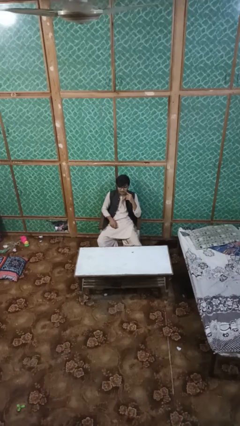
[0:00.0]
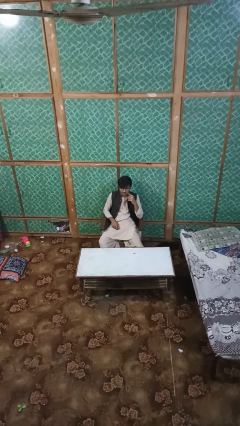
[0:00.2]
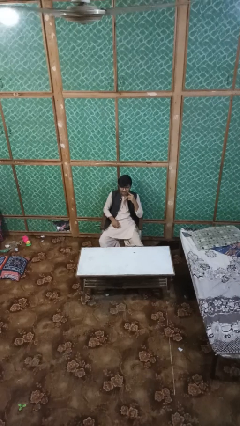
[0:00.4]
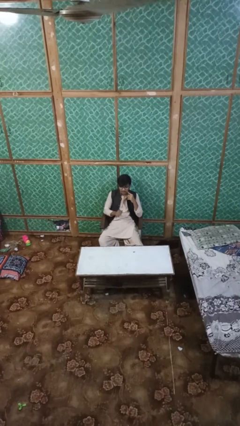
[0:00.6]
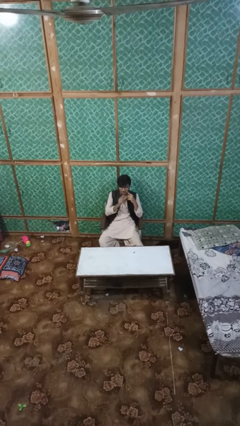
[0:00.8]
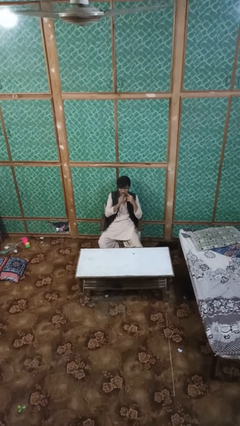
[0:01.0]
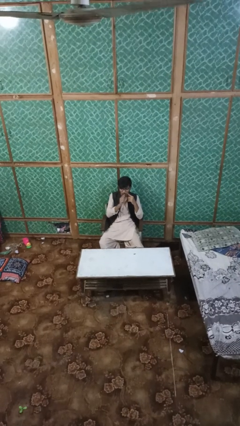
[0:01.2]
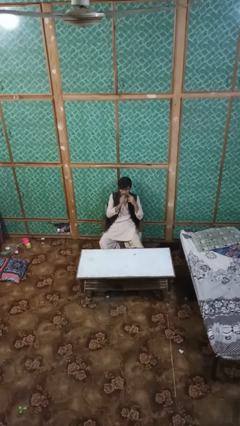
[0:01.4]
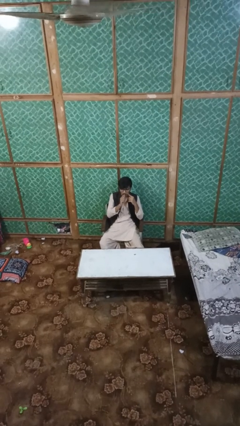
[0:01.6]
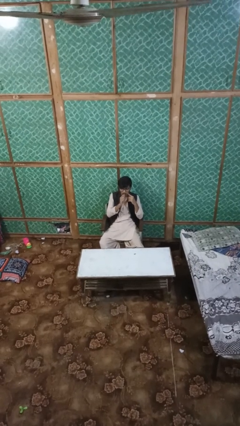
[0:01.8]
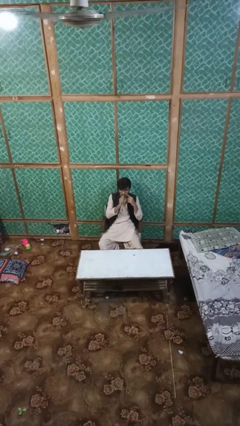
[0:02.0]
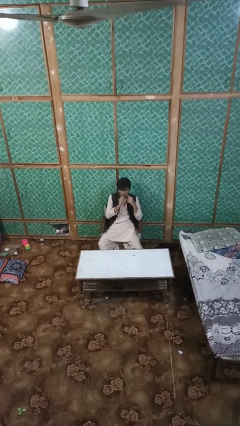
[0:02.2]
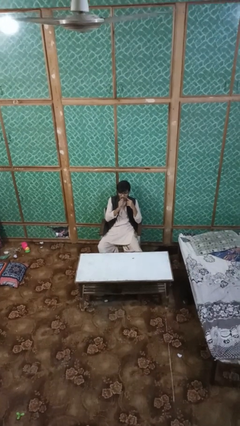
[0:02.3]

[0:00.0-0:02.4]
person vapes

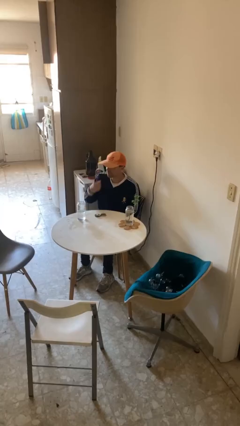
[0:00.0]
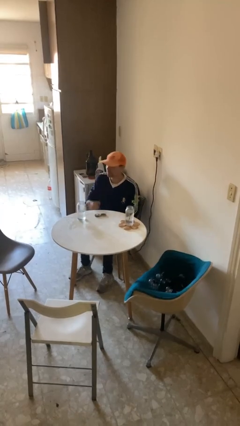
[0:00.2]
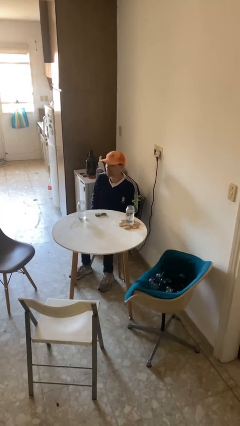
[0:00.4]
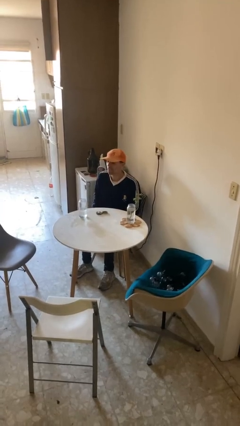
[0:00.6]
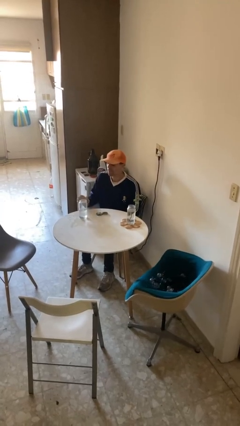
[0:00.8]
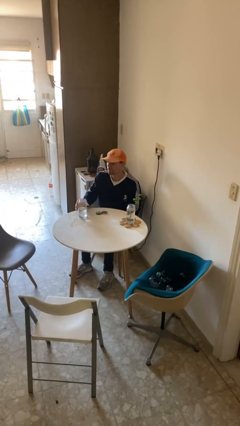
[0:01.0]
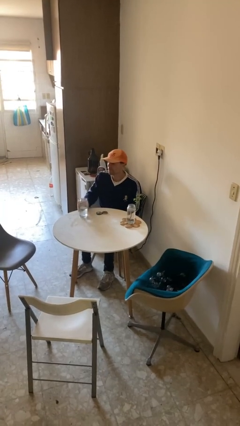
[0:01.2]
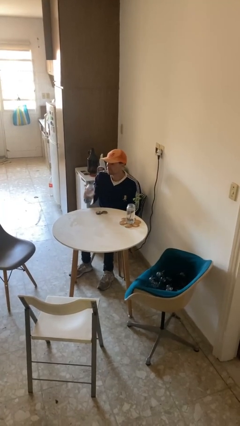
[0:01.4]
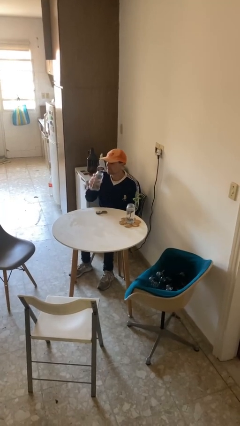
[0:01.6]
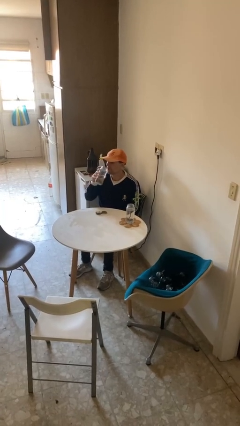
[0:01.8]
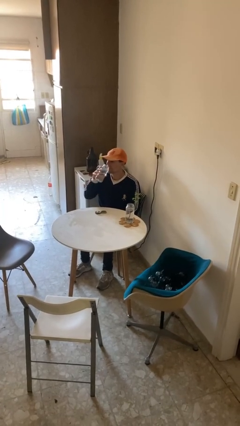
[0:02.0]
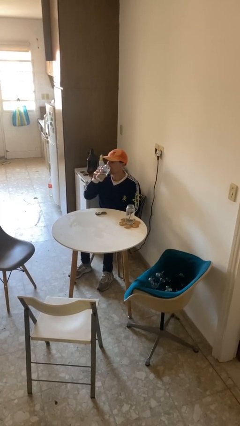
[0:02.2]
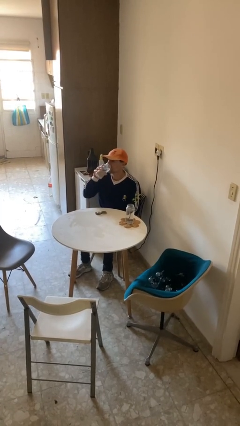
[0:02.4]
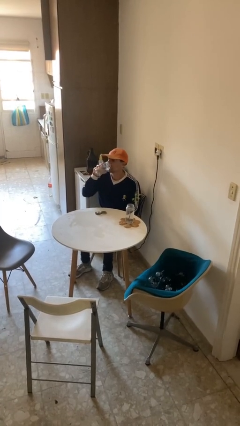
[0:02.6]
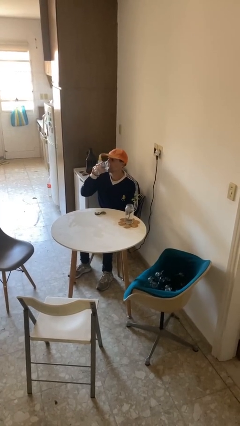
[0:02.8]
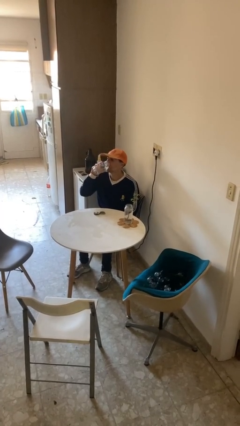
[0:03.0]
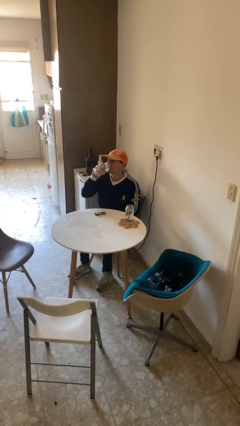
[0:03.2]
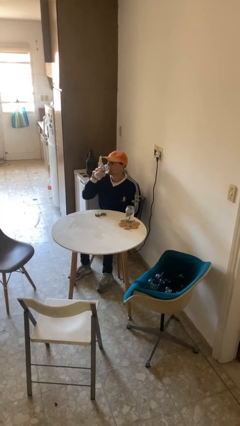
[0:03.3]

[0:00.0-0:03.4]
person drinks from cup

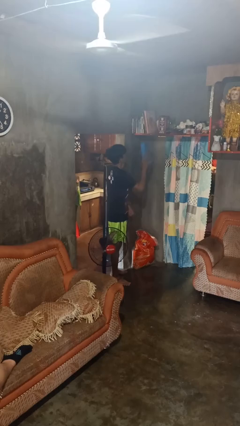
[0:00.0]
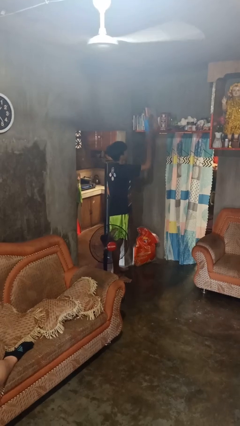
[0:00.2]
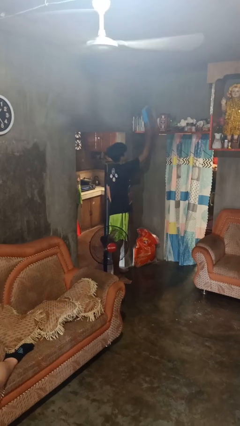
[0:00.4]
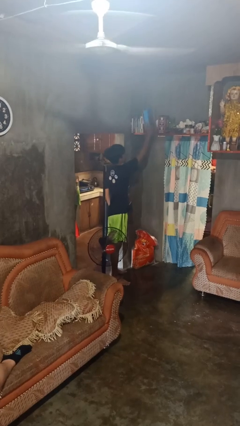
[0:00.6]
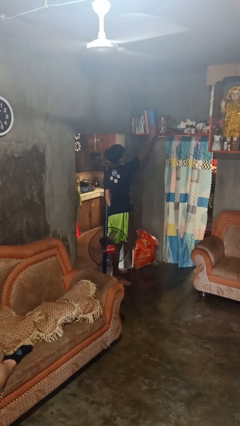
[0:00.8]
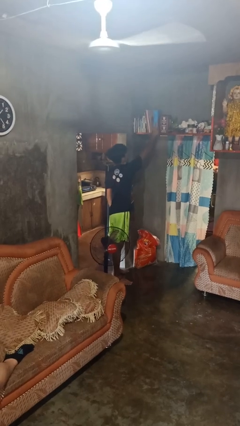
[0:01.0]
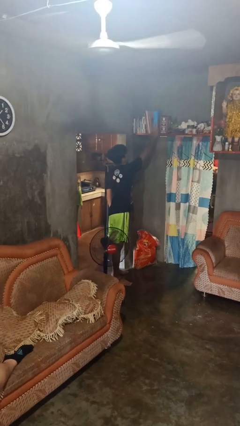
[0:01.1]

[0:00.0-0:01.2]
person puts down object on shelf

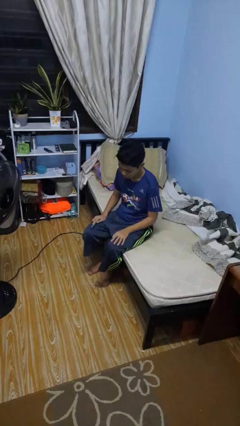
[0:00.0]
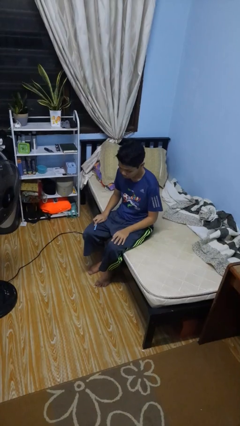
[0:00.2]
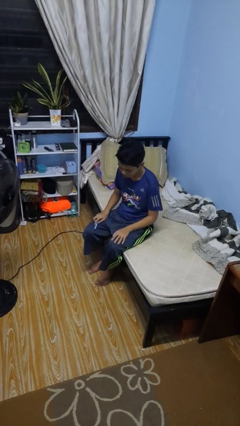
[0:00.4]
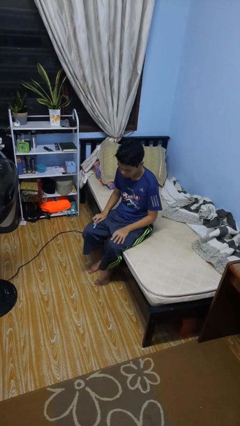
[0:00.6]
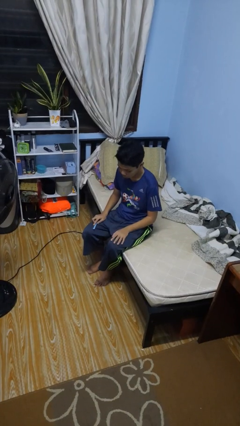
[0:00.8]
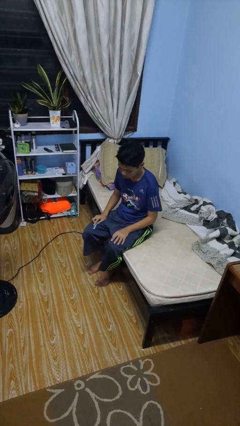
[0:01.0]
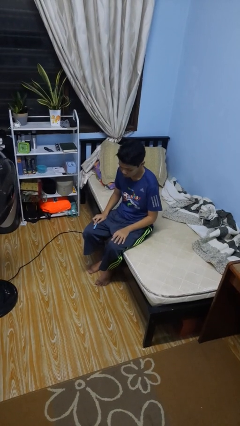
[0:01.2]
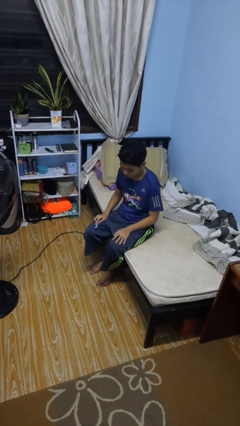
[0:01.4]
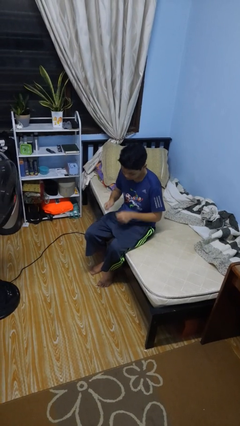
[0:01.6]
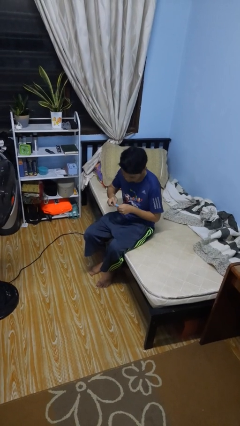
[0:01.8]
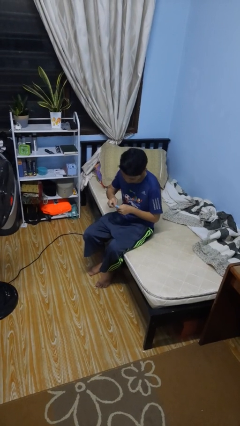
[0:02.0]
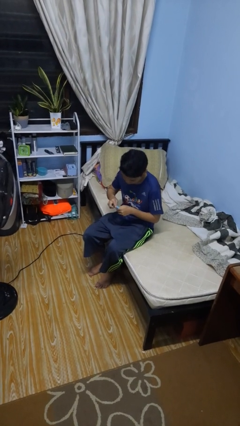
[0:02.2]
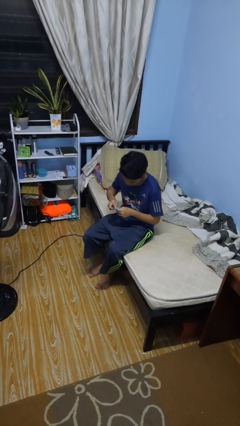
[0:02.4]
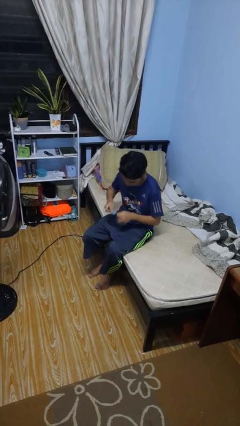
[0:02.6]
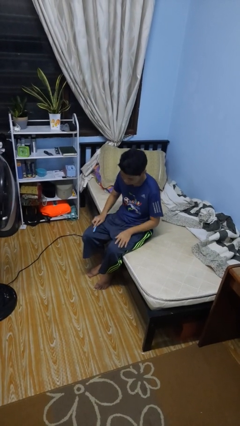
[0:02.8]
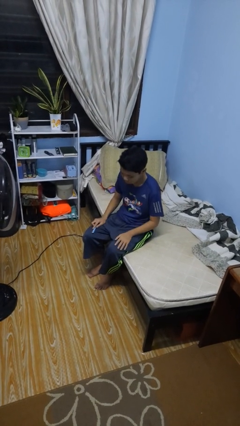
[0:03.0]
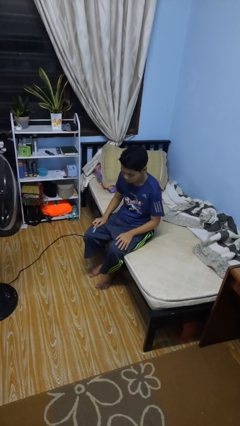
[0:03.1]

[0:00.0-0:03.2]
person files fingernails

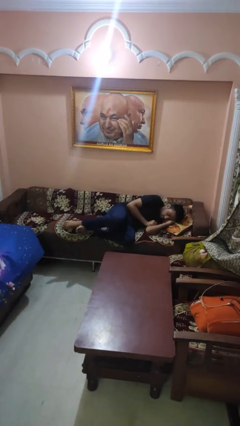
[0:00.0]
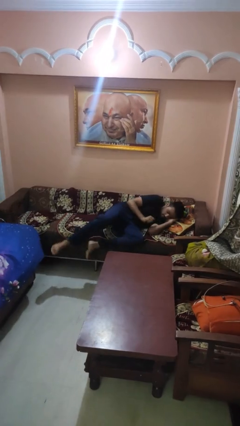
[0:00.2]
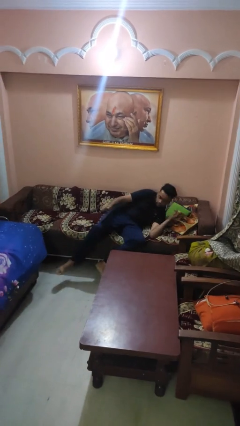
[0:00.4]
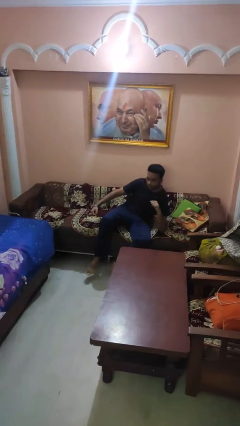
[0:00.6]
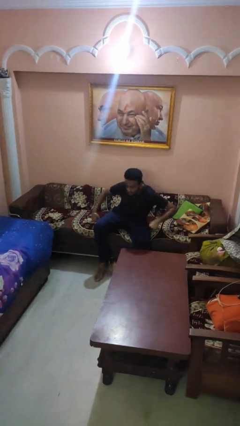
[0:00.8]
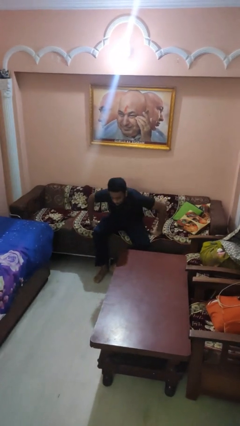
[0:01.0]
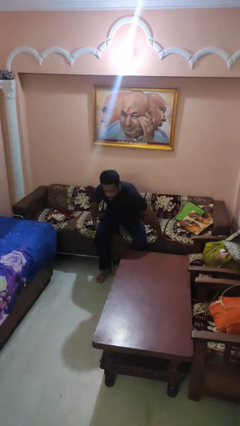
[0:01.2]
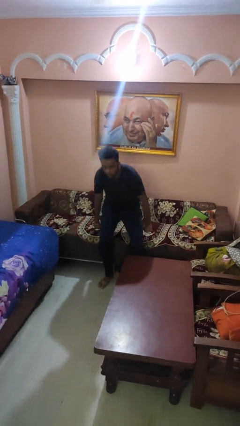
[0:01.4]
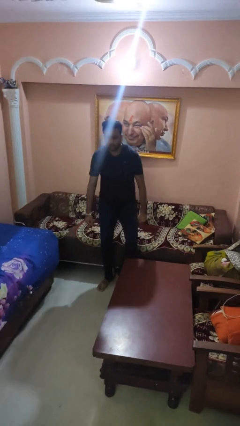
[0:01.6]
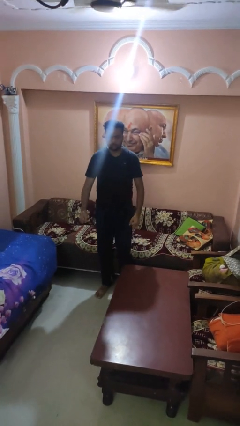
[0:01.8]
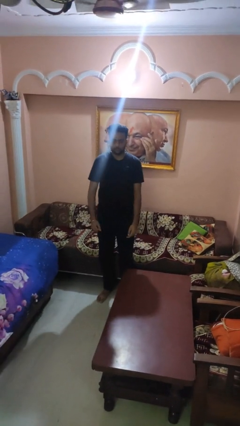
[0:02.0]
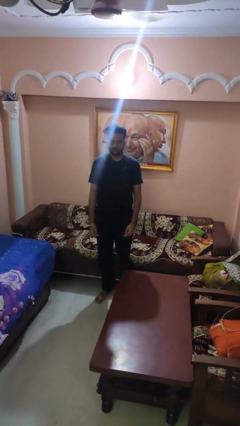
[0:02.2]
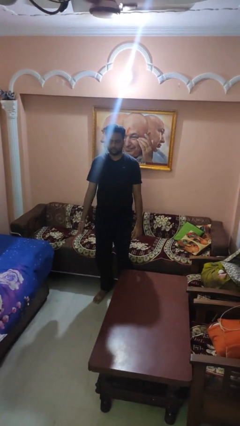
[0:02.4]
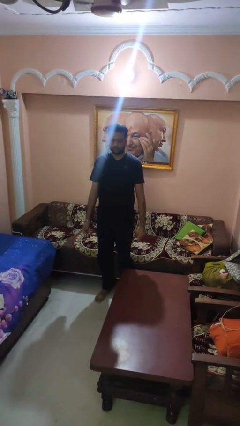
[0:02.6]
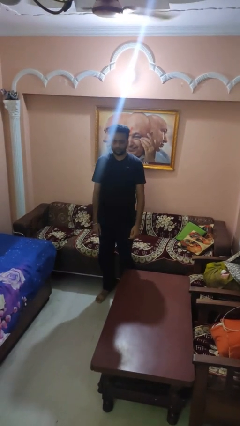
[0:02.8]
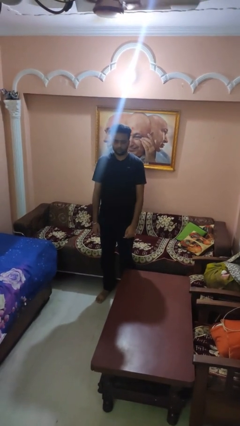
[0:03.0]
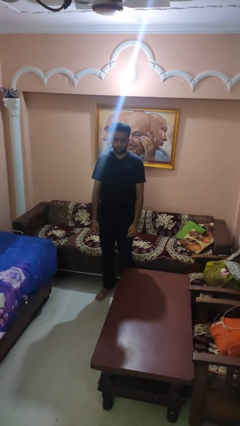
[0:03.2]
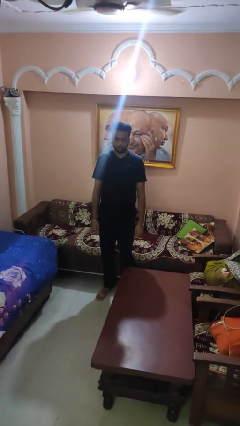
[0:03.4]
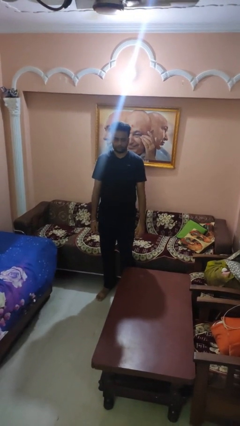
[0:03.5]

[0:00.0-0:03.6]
person stands up

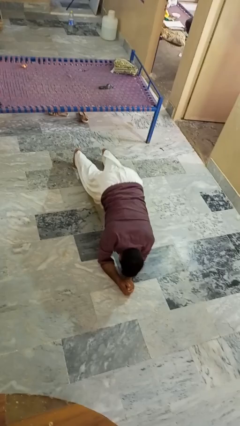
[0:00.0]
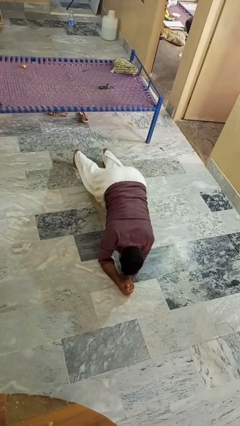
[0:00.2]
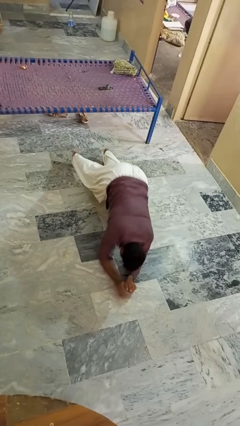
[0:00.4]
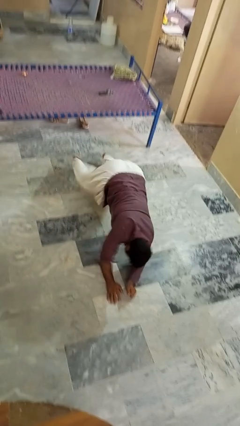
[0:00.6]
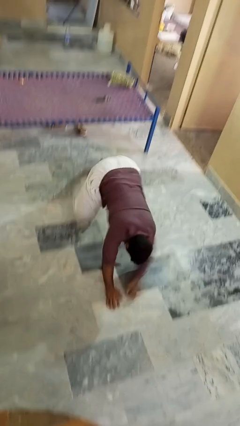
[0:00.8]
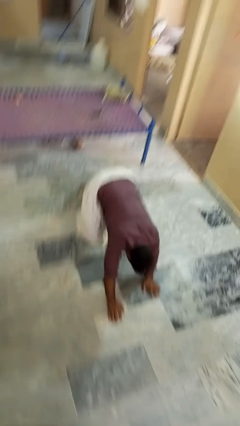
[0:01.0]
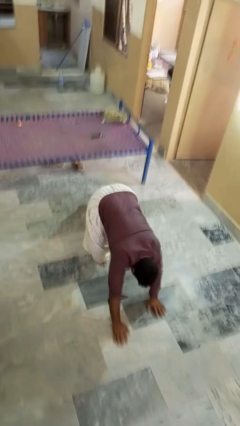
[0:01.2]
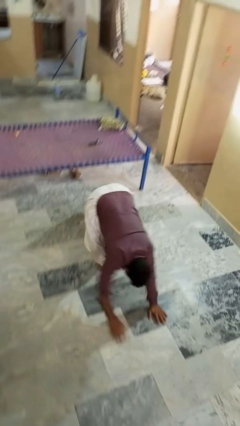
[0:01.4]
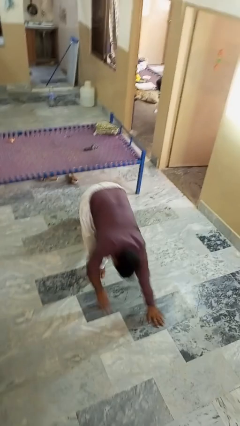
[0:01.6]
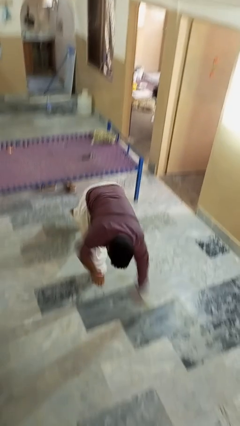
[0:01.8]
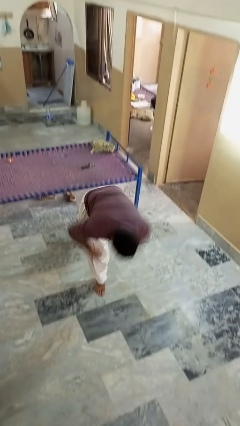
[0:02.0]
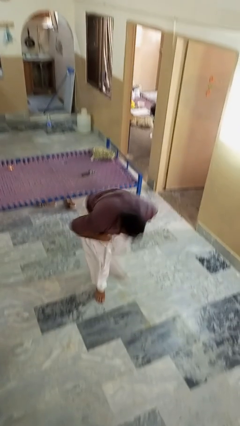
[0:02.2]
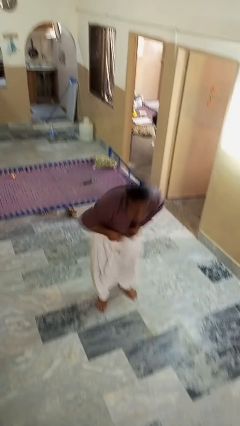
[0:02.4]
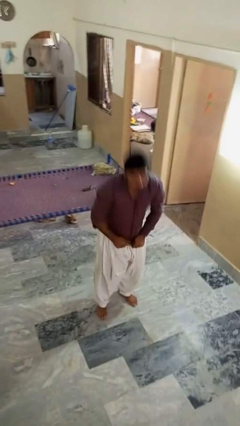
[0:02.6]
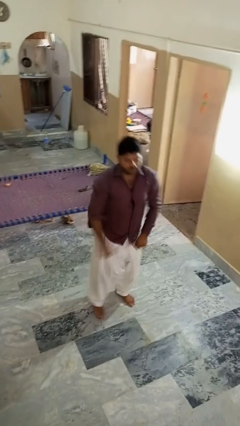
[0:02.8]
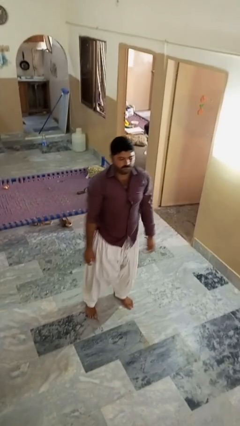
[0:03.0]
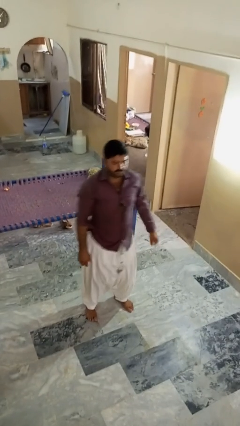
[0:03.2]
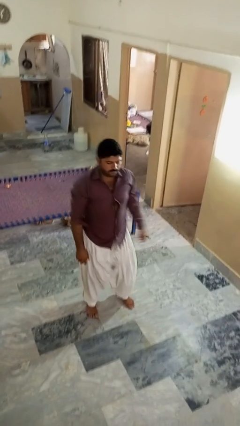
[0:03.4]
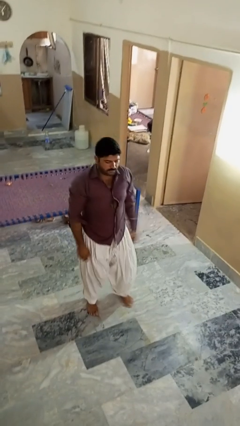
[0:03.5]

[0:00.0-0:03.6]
person stands up from floor
